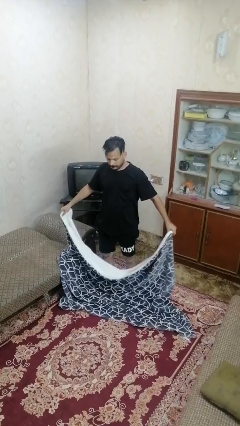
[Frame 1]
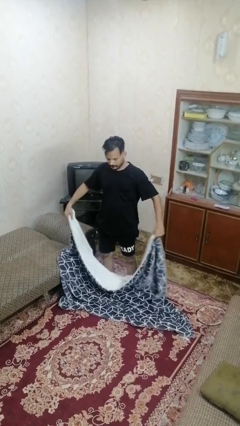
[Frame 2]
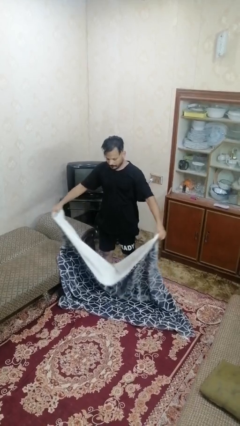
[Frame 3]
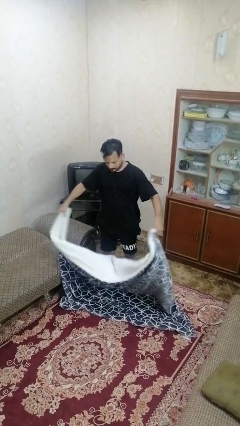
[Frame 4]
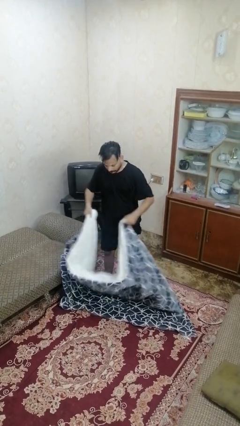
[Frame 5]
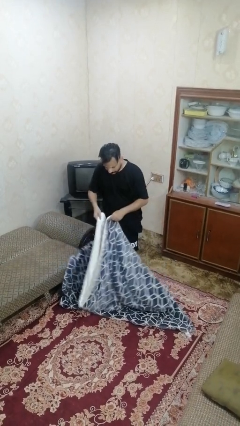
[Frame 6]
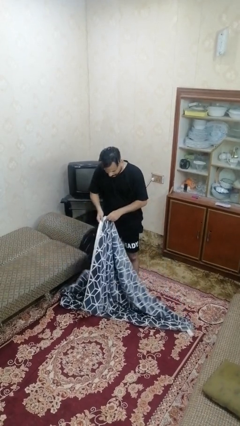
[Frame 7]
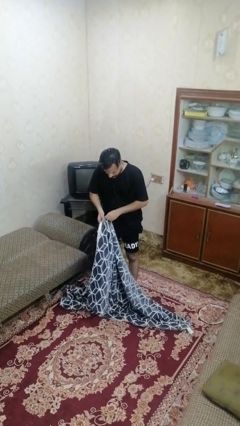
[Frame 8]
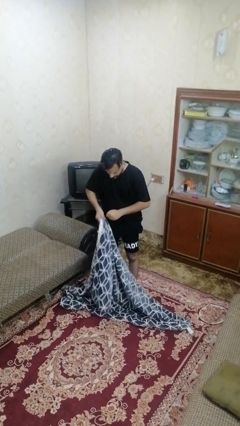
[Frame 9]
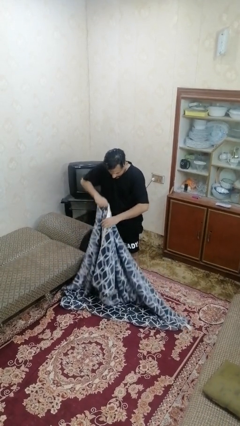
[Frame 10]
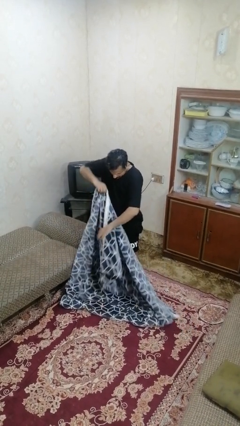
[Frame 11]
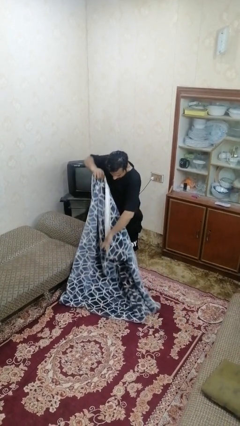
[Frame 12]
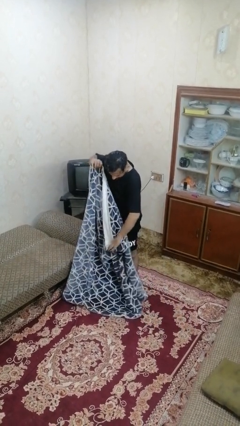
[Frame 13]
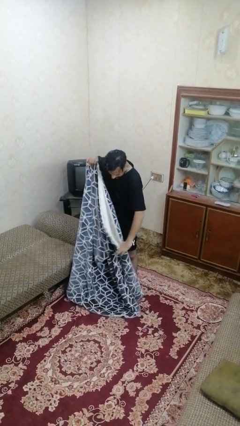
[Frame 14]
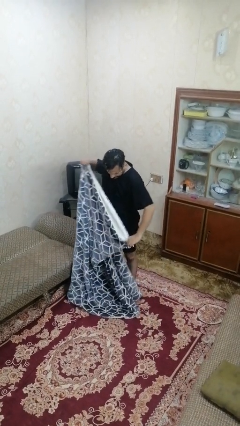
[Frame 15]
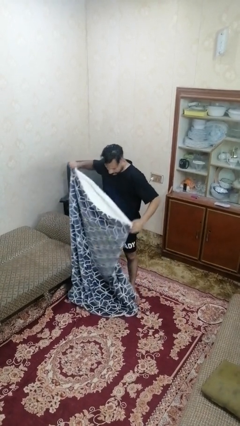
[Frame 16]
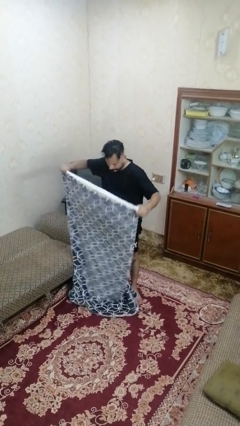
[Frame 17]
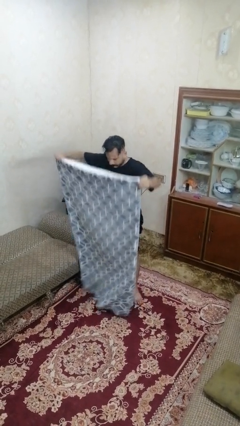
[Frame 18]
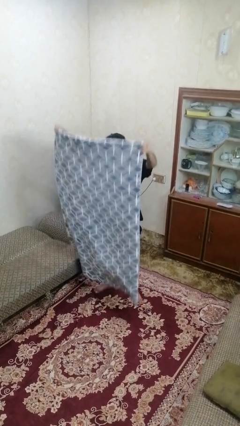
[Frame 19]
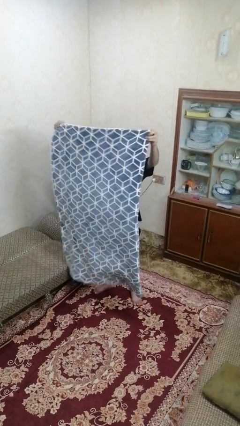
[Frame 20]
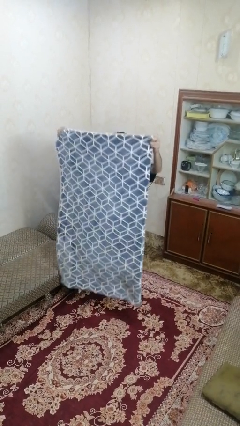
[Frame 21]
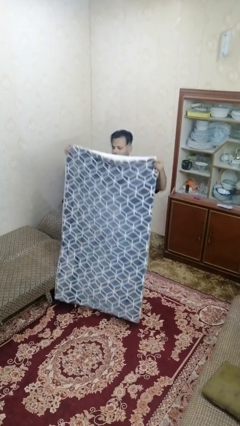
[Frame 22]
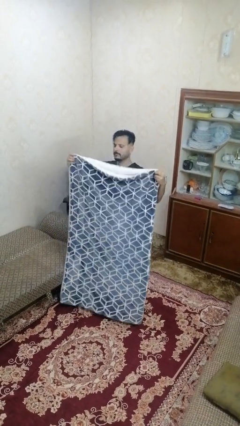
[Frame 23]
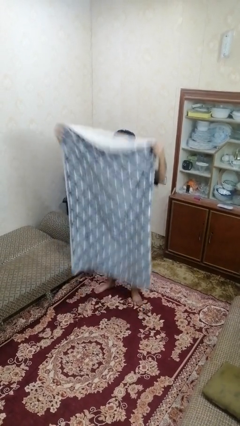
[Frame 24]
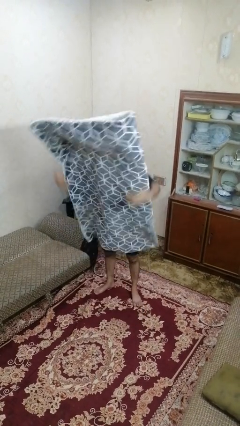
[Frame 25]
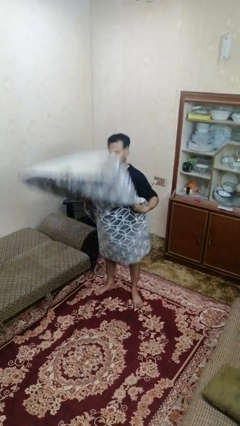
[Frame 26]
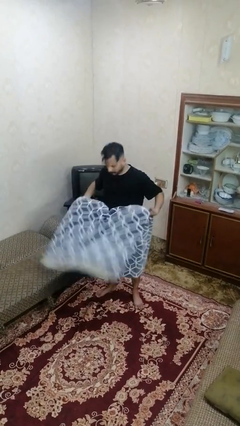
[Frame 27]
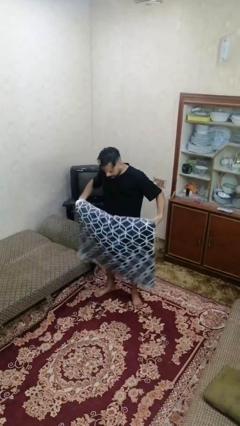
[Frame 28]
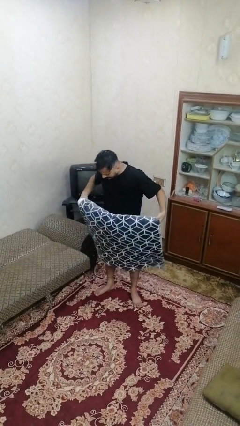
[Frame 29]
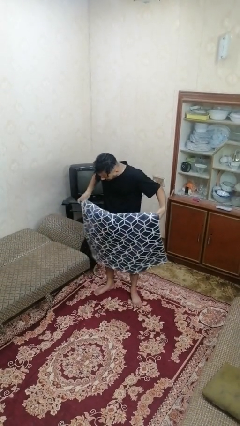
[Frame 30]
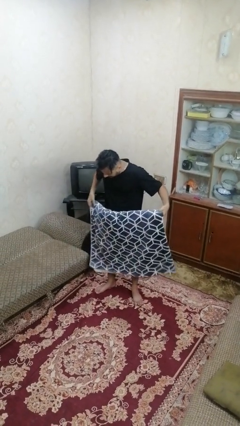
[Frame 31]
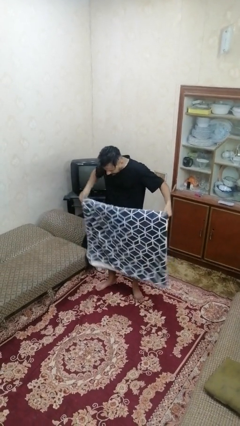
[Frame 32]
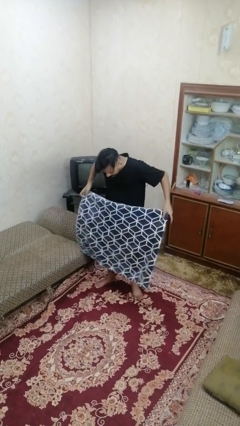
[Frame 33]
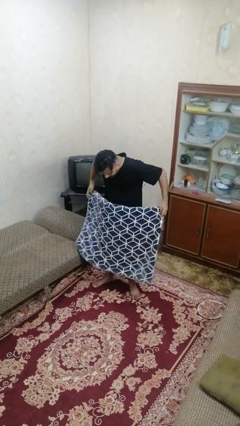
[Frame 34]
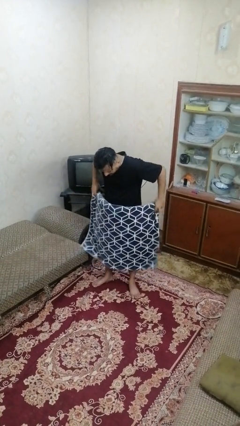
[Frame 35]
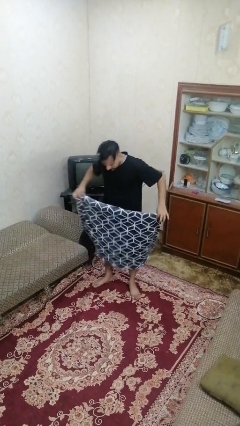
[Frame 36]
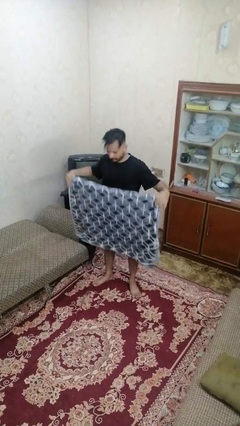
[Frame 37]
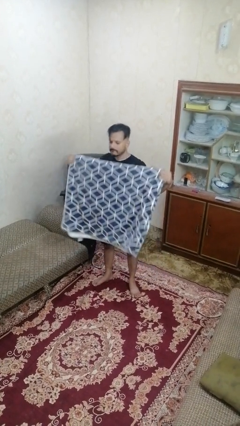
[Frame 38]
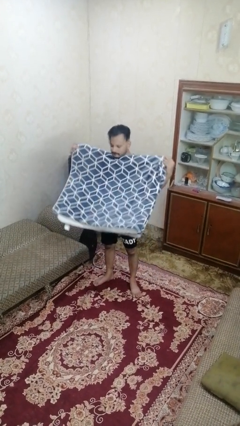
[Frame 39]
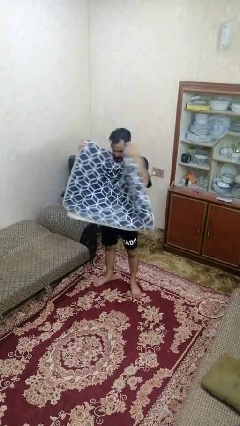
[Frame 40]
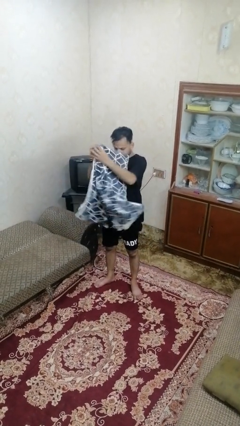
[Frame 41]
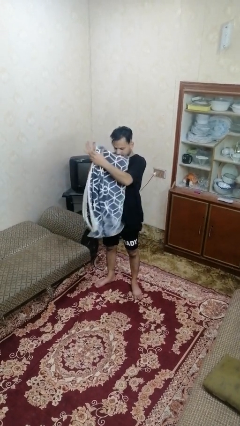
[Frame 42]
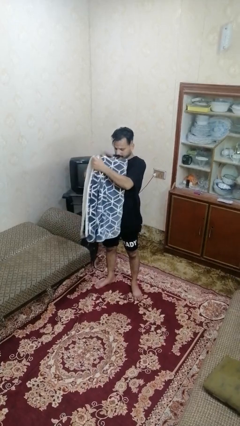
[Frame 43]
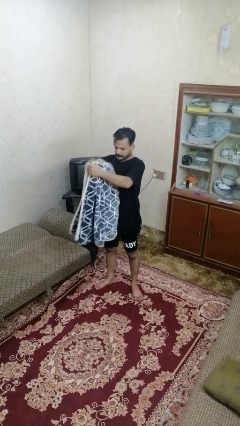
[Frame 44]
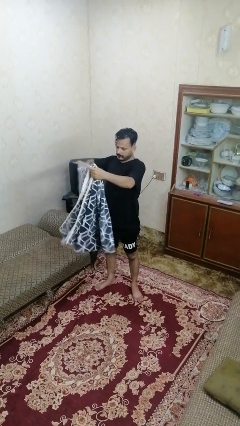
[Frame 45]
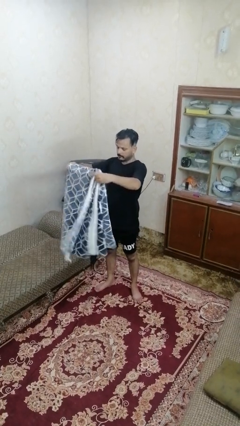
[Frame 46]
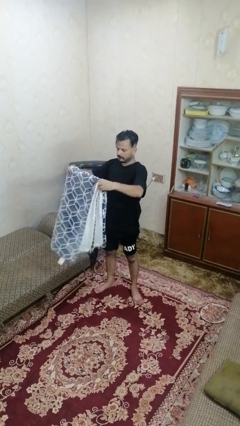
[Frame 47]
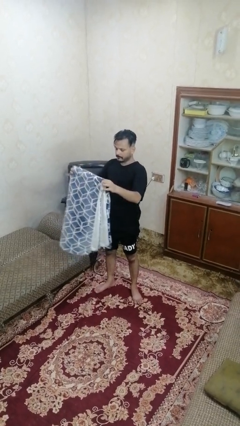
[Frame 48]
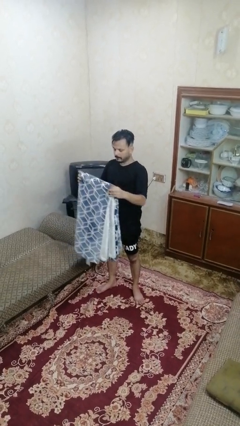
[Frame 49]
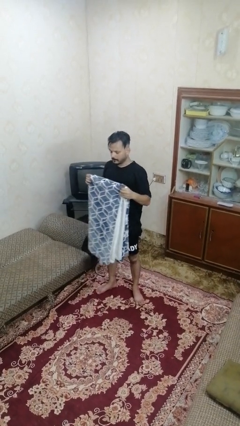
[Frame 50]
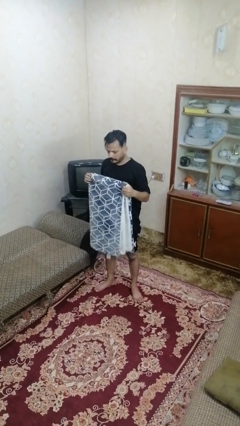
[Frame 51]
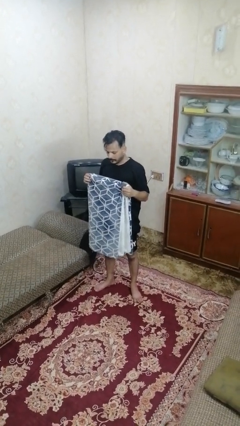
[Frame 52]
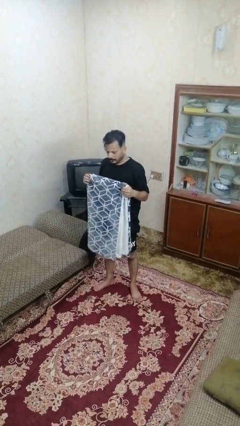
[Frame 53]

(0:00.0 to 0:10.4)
person folds blanket

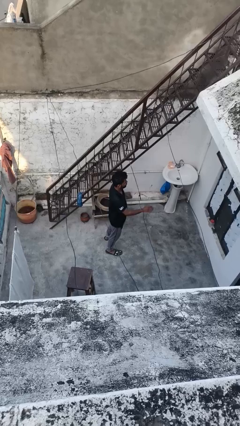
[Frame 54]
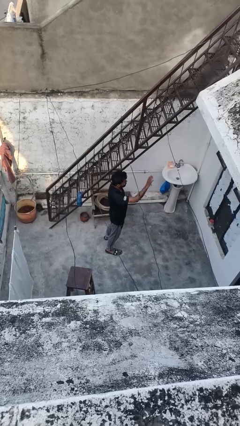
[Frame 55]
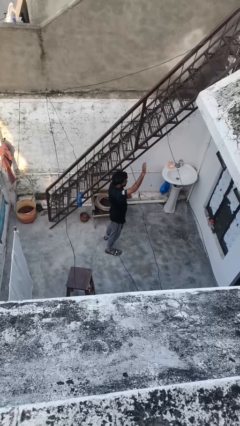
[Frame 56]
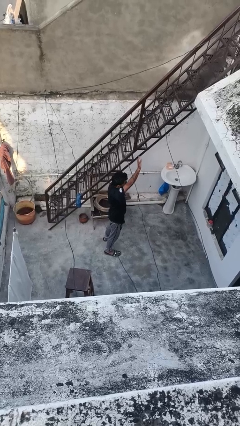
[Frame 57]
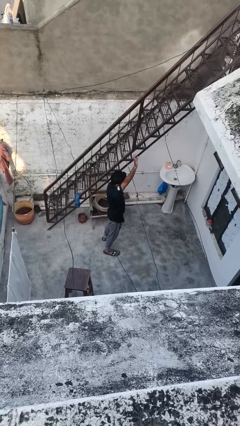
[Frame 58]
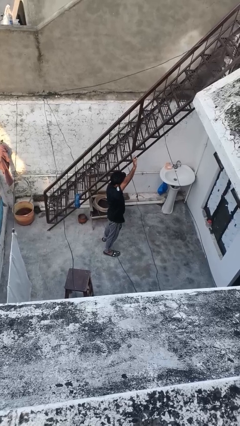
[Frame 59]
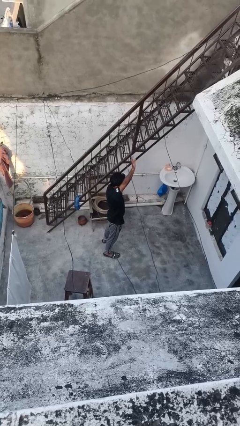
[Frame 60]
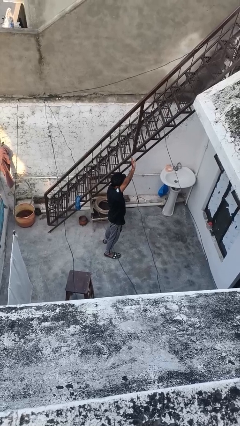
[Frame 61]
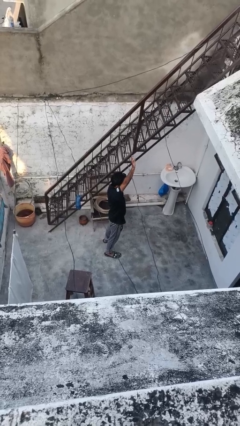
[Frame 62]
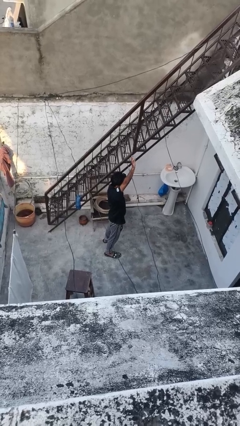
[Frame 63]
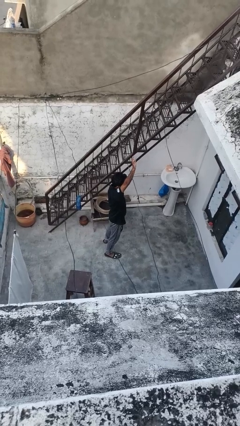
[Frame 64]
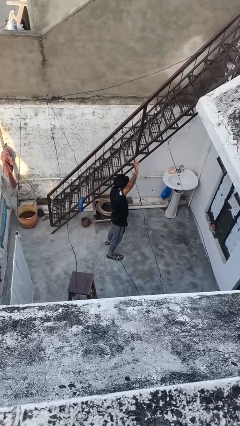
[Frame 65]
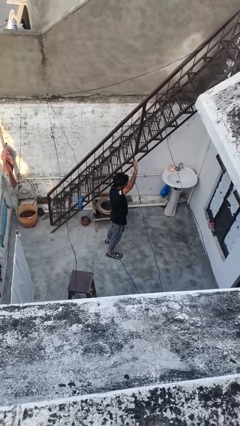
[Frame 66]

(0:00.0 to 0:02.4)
person gestures raise hand

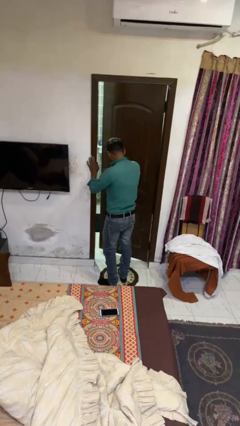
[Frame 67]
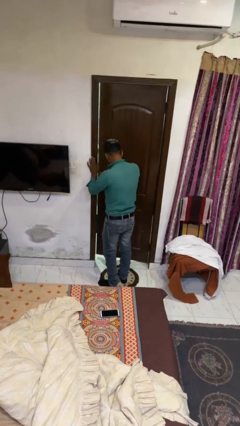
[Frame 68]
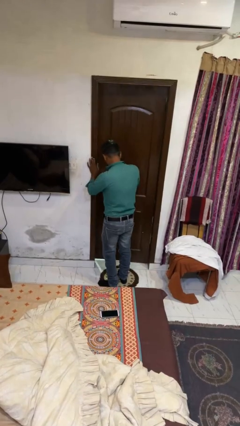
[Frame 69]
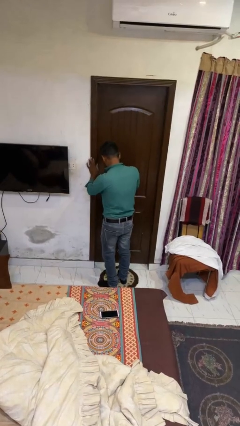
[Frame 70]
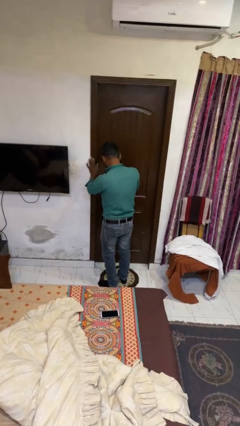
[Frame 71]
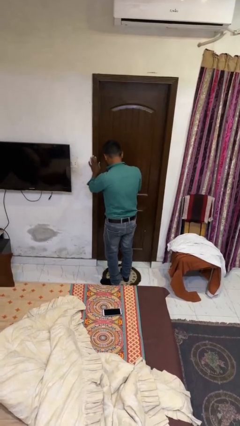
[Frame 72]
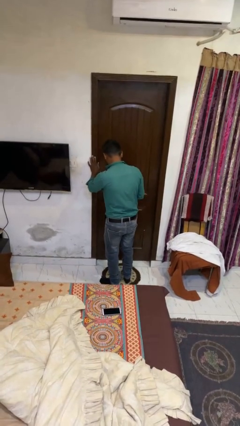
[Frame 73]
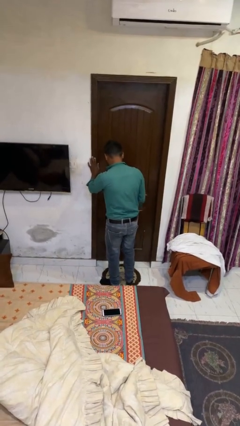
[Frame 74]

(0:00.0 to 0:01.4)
person closes facility door

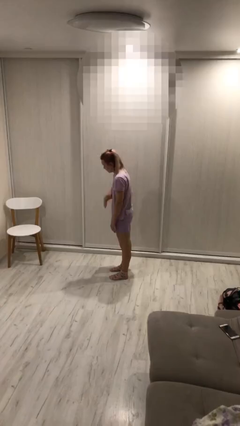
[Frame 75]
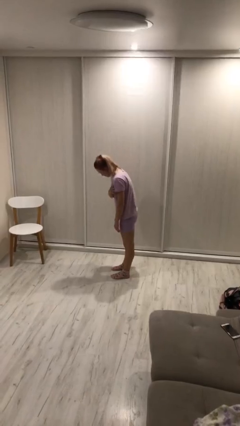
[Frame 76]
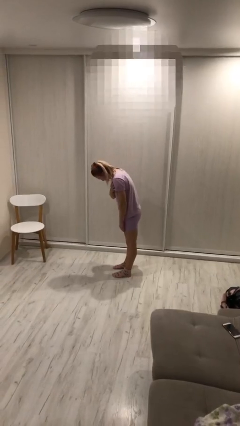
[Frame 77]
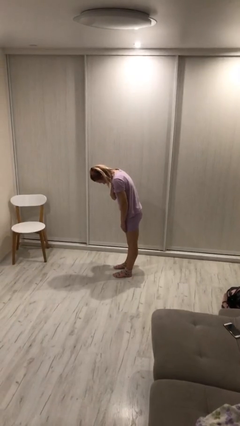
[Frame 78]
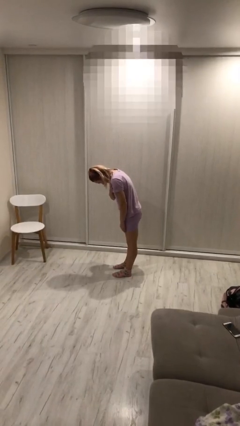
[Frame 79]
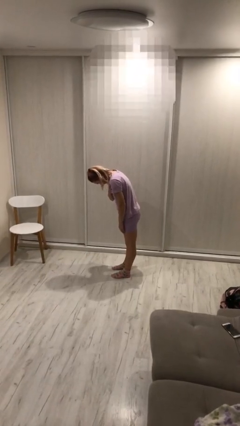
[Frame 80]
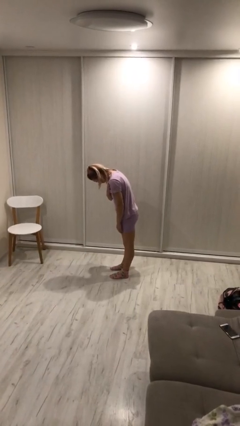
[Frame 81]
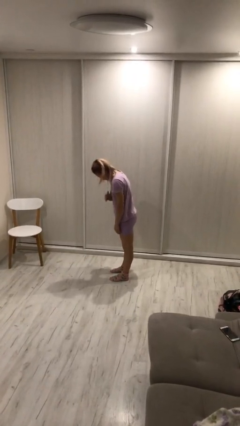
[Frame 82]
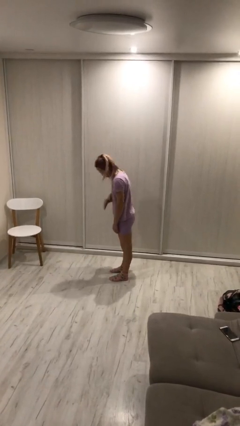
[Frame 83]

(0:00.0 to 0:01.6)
person bows

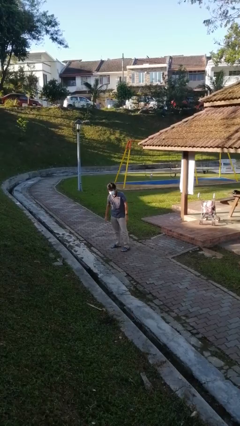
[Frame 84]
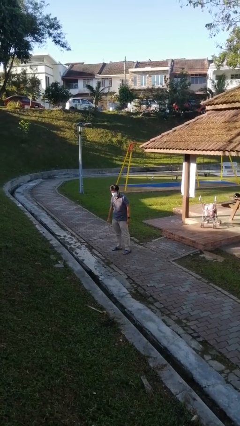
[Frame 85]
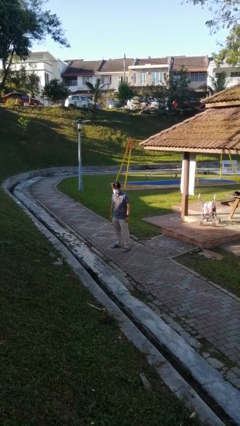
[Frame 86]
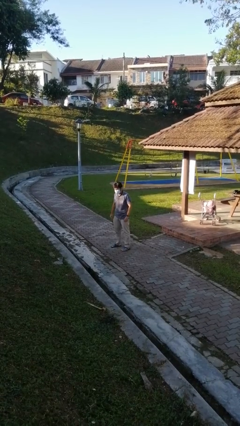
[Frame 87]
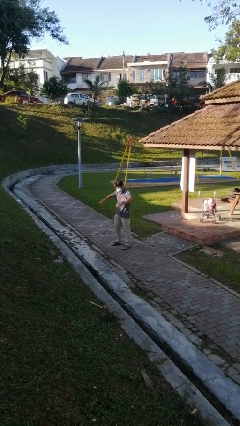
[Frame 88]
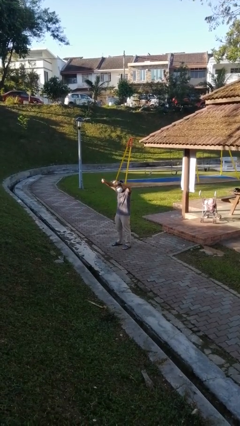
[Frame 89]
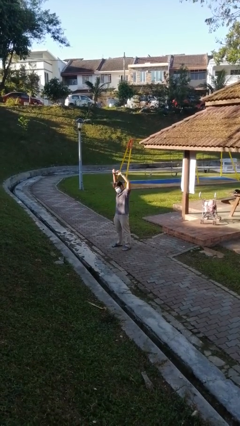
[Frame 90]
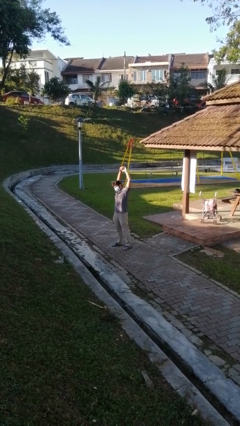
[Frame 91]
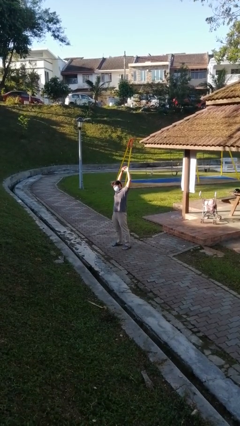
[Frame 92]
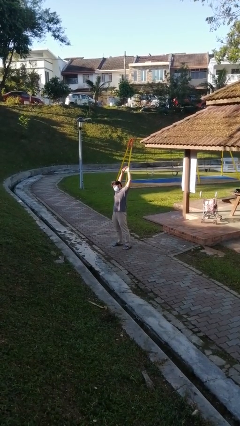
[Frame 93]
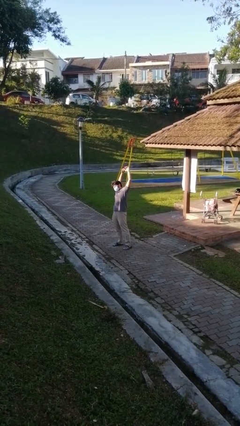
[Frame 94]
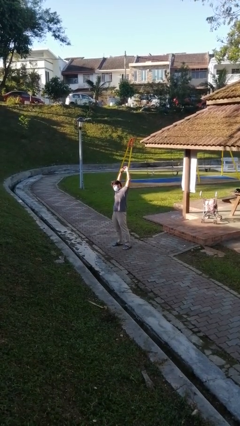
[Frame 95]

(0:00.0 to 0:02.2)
person stretches arms over head
